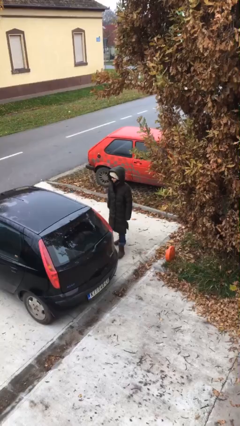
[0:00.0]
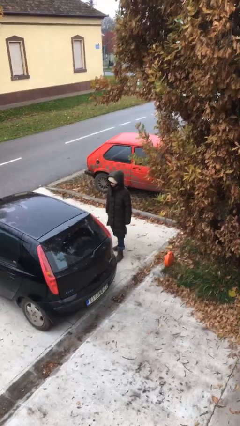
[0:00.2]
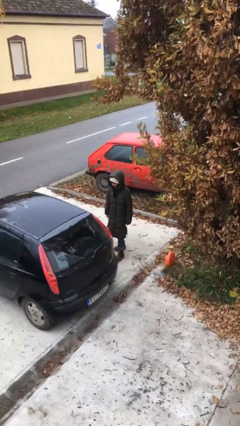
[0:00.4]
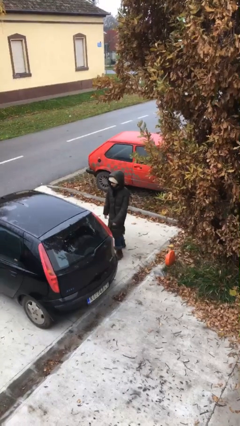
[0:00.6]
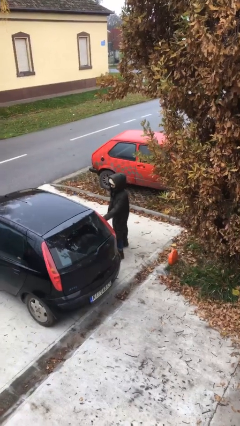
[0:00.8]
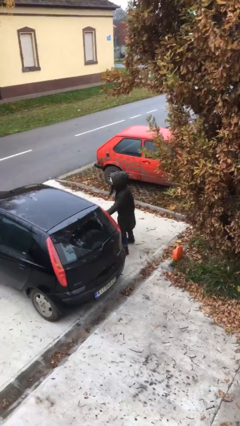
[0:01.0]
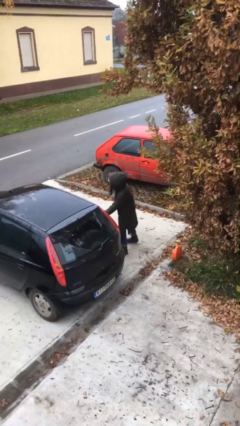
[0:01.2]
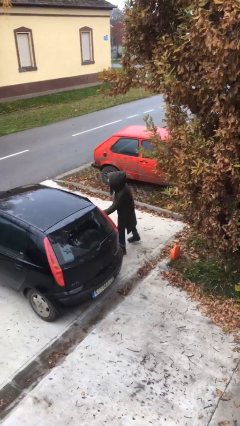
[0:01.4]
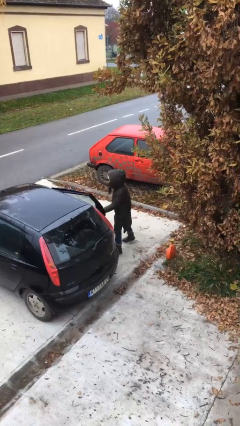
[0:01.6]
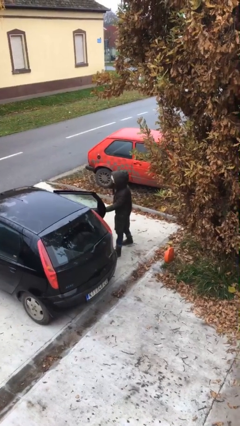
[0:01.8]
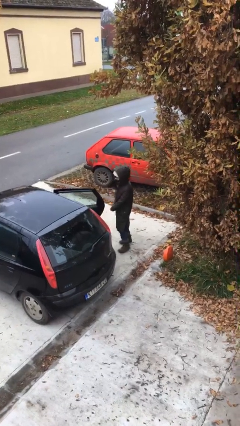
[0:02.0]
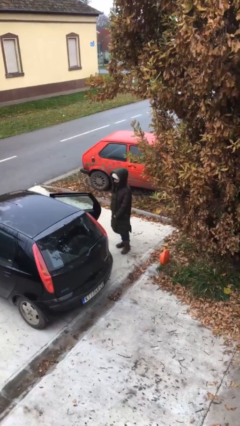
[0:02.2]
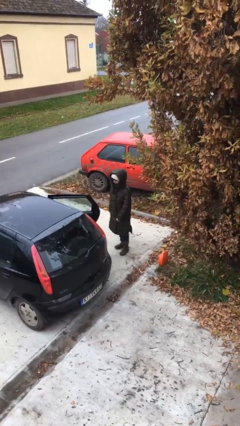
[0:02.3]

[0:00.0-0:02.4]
person opens car door

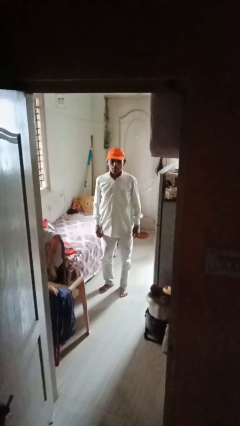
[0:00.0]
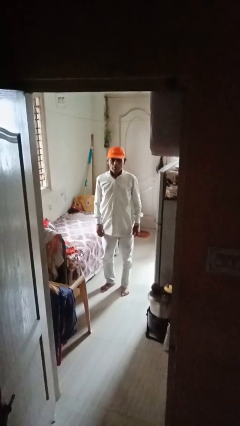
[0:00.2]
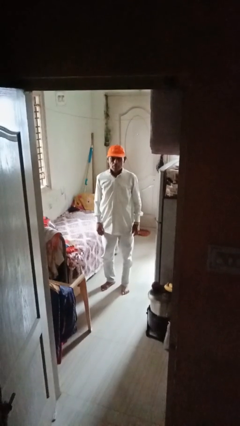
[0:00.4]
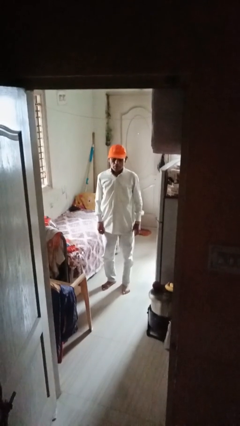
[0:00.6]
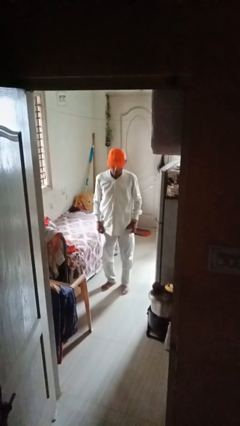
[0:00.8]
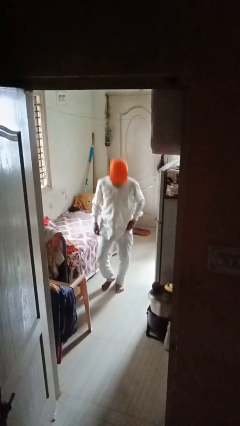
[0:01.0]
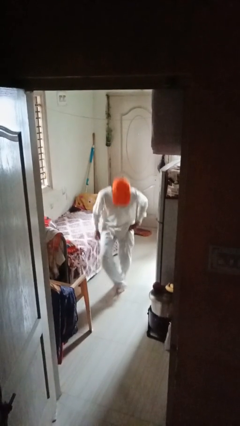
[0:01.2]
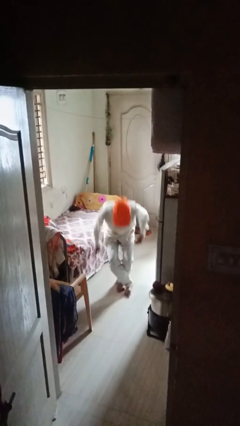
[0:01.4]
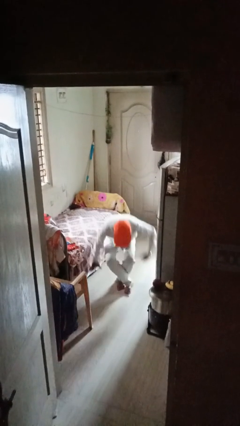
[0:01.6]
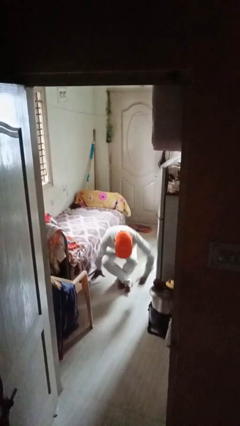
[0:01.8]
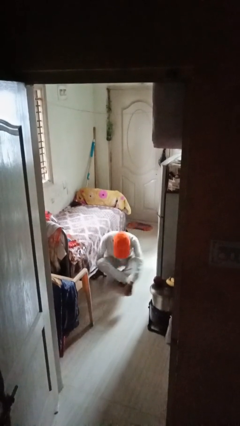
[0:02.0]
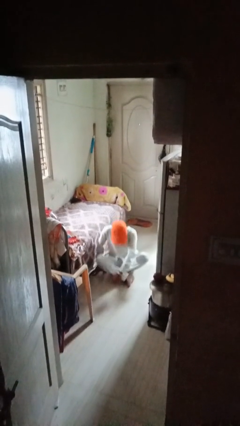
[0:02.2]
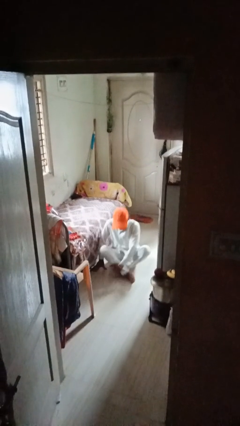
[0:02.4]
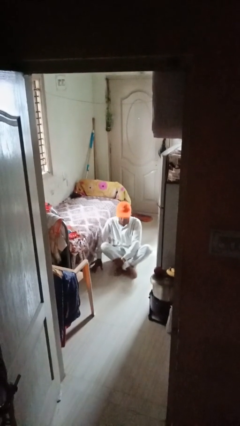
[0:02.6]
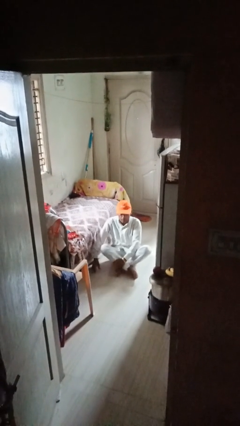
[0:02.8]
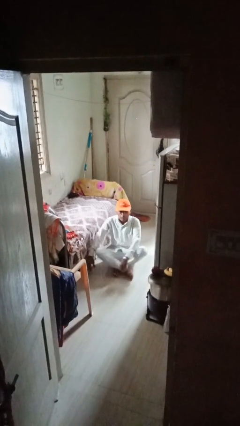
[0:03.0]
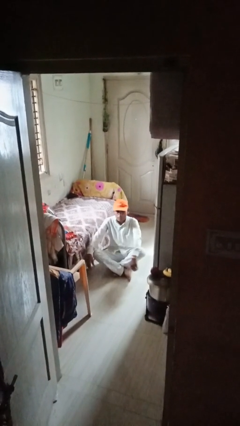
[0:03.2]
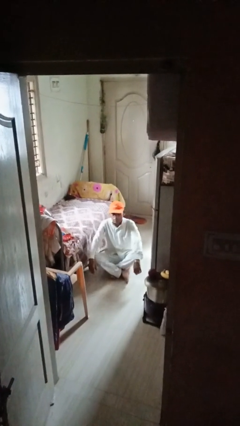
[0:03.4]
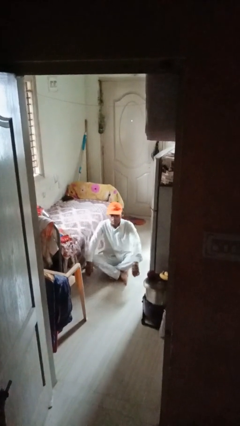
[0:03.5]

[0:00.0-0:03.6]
person sits crisscross

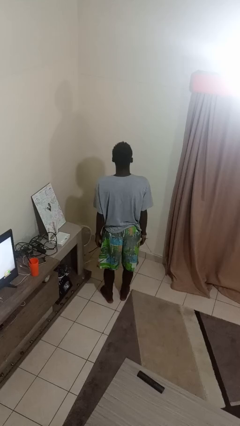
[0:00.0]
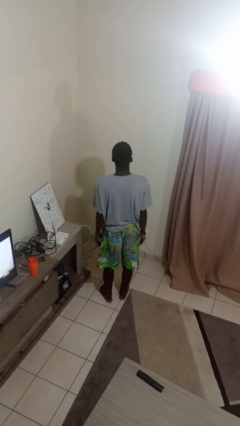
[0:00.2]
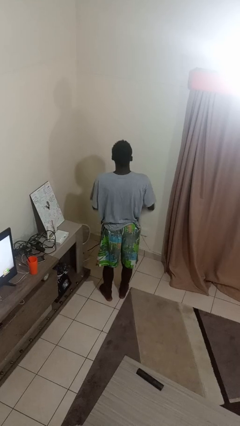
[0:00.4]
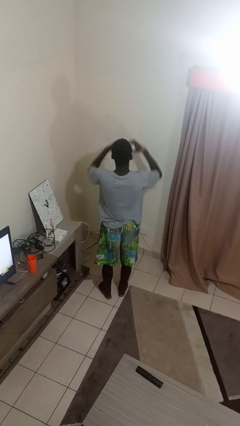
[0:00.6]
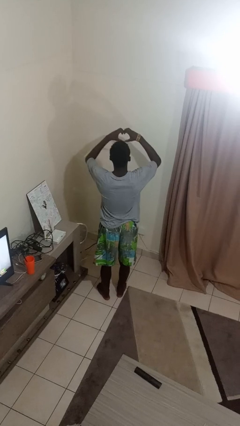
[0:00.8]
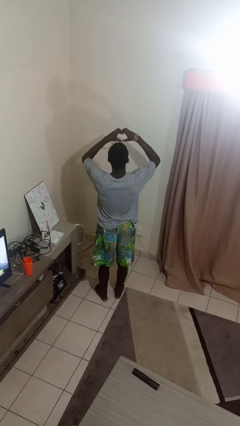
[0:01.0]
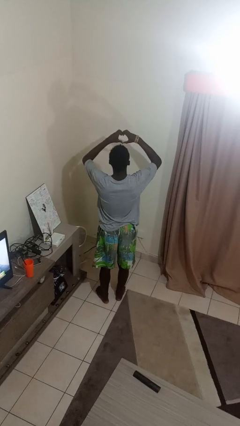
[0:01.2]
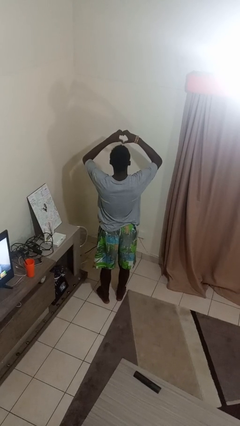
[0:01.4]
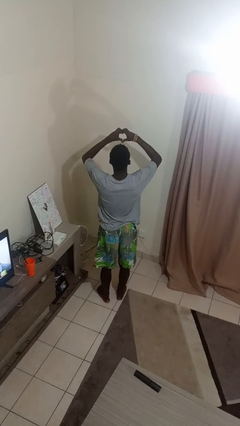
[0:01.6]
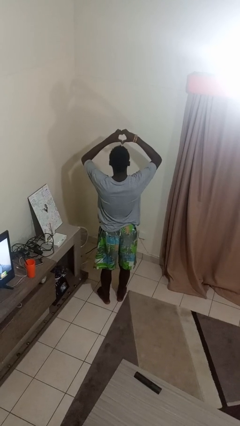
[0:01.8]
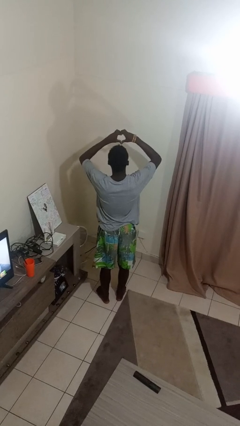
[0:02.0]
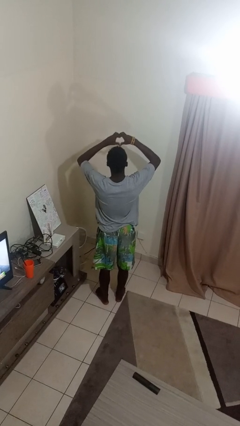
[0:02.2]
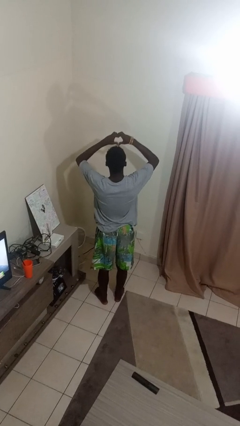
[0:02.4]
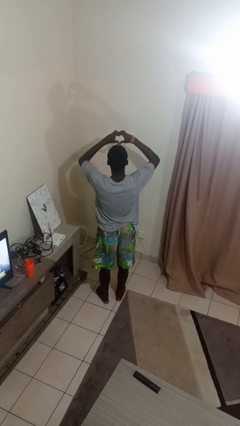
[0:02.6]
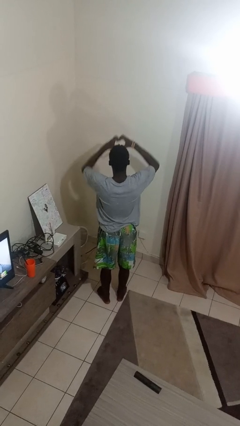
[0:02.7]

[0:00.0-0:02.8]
person gestures heart

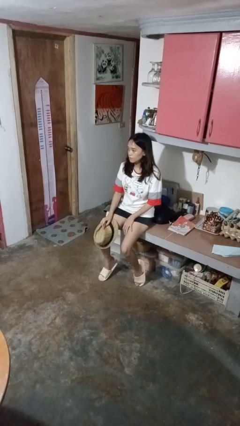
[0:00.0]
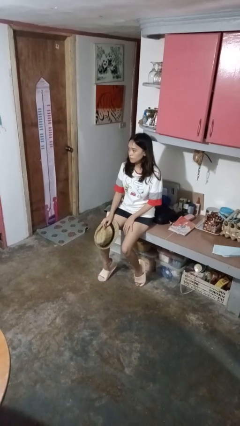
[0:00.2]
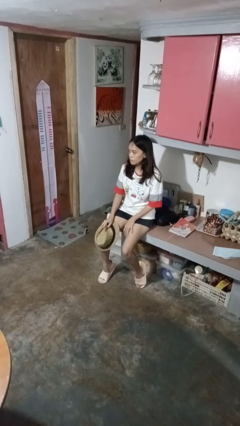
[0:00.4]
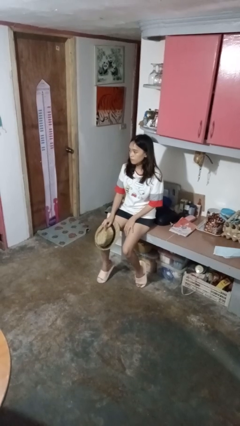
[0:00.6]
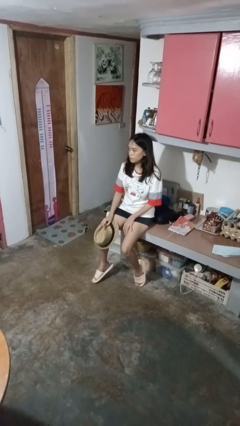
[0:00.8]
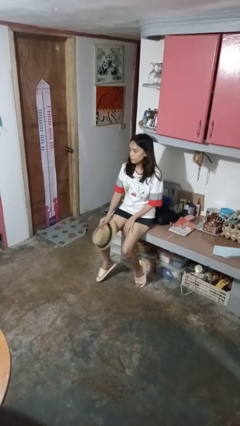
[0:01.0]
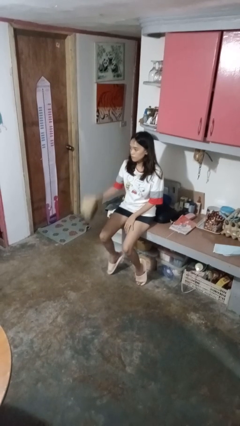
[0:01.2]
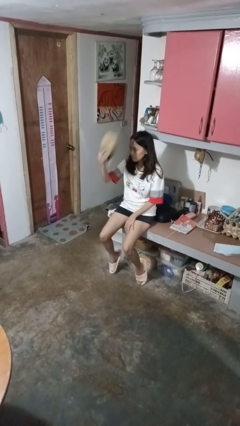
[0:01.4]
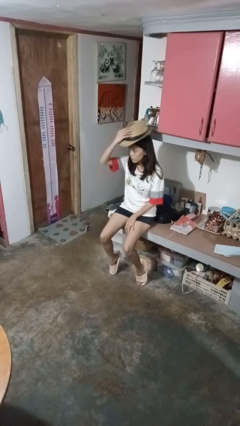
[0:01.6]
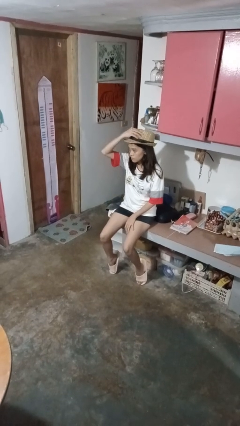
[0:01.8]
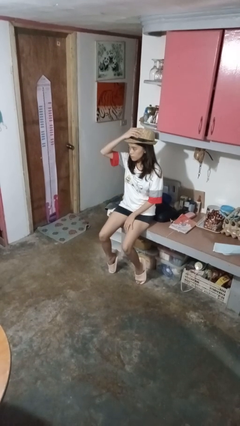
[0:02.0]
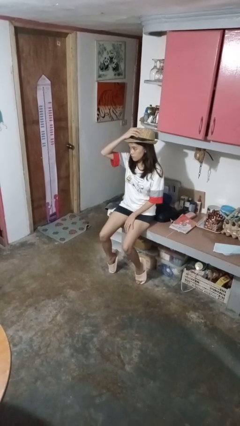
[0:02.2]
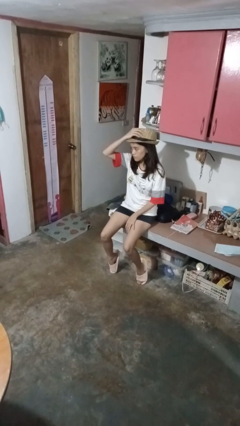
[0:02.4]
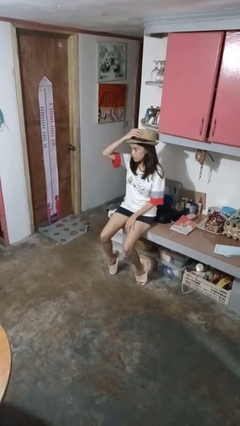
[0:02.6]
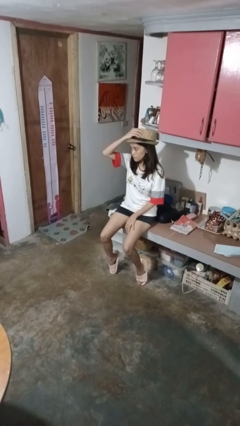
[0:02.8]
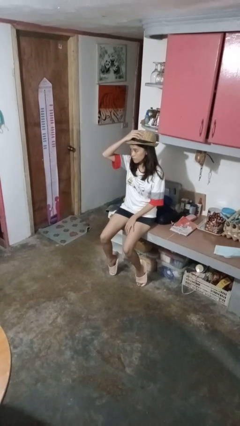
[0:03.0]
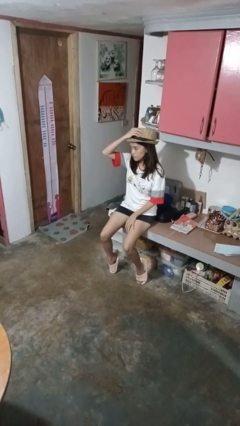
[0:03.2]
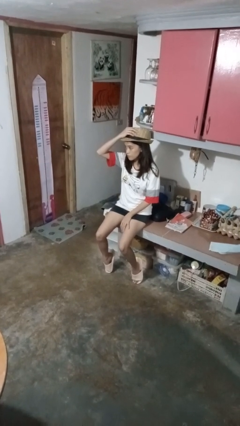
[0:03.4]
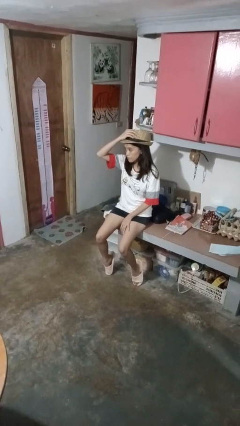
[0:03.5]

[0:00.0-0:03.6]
person puts on hat

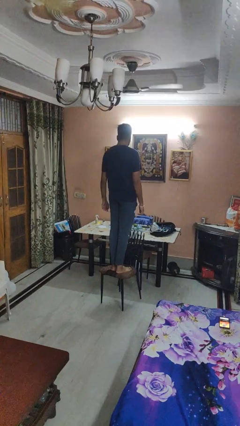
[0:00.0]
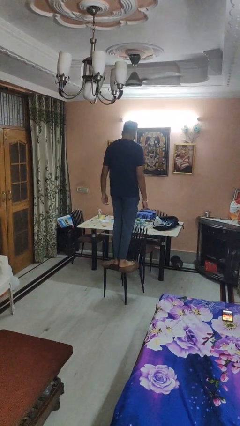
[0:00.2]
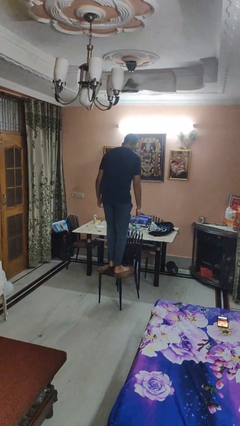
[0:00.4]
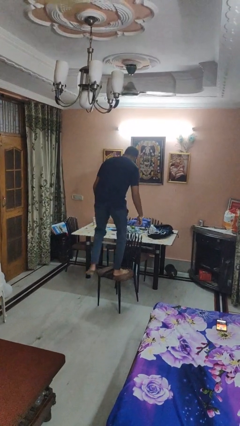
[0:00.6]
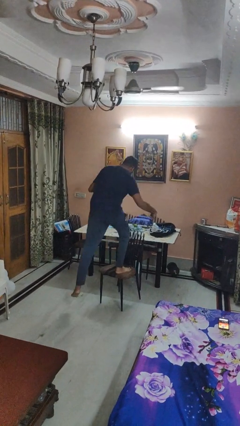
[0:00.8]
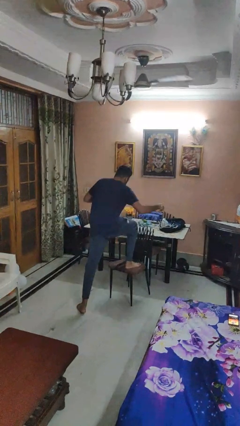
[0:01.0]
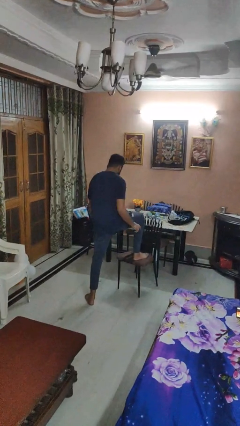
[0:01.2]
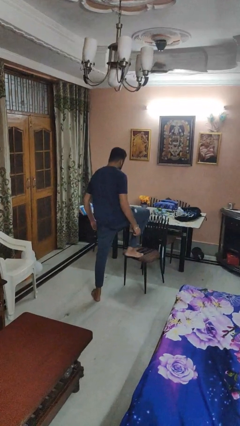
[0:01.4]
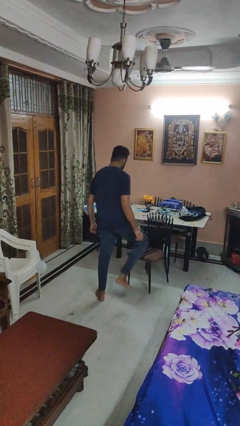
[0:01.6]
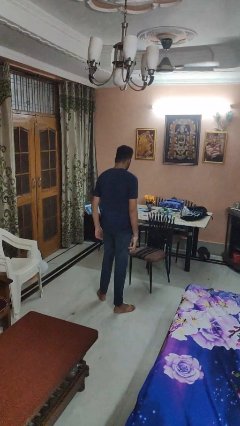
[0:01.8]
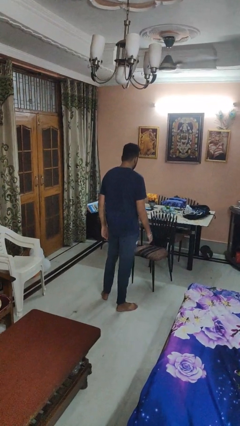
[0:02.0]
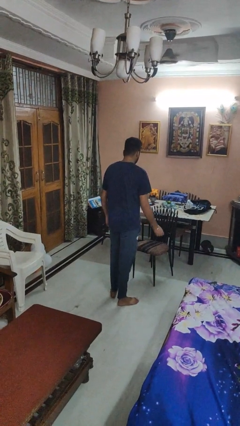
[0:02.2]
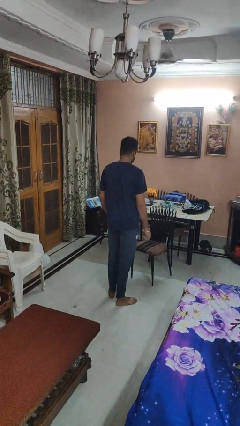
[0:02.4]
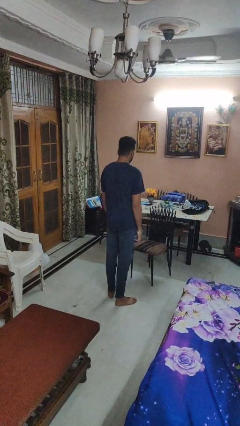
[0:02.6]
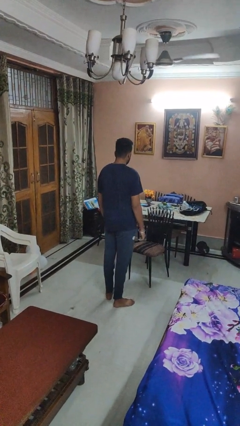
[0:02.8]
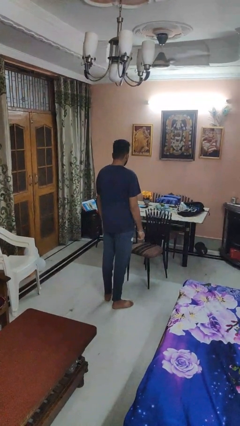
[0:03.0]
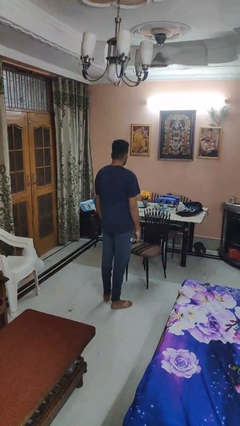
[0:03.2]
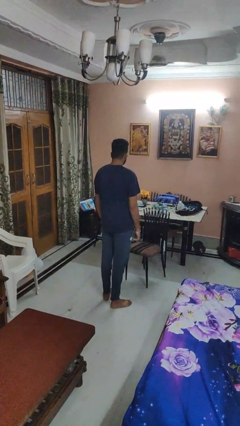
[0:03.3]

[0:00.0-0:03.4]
person climbs off chair

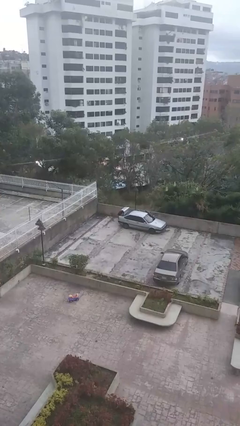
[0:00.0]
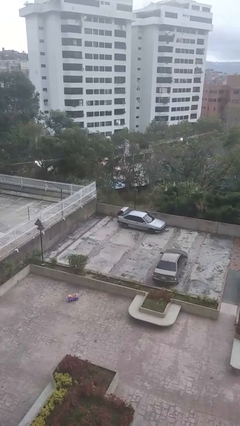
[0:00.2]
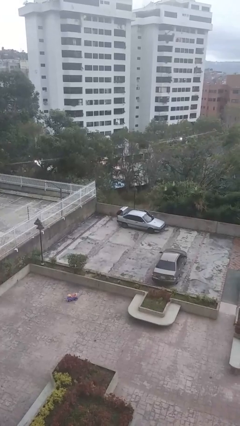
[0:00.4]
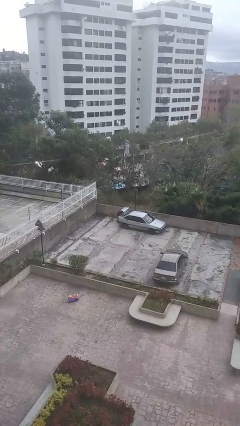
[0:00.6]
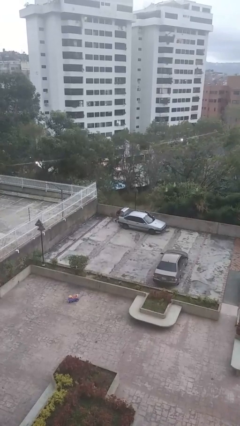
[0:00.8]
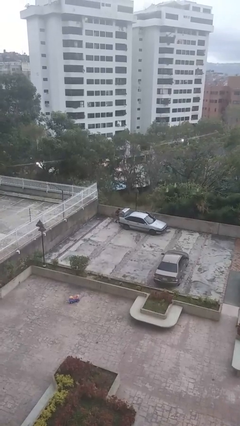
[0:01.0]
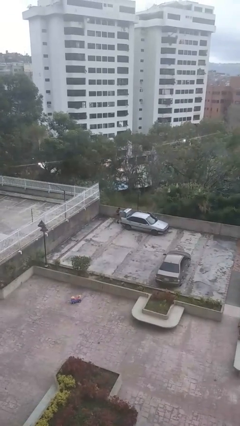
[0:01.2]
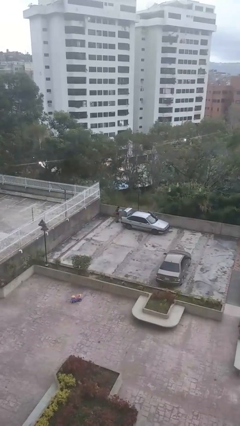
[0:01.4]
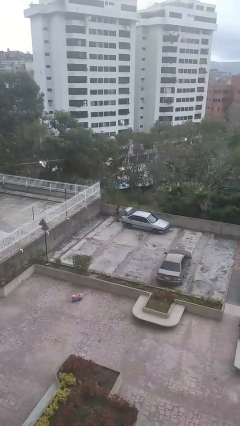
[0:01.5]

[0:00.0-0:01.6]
person unloads car
